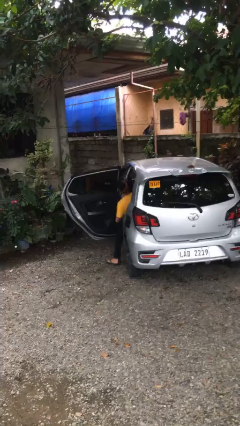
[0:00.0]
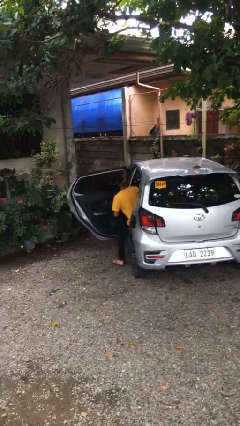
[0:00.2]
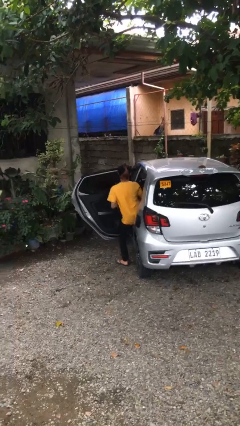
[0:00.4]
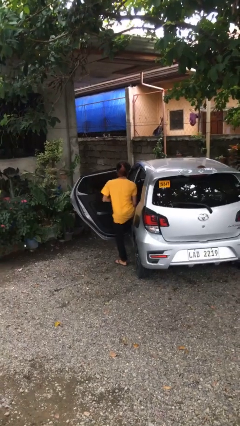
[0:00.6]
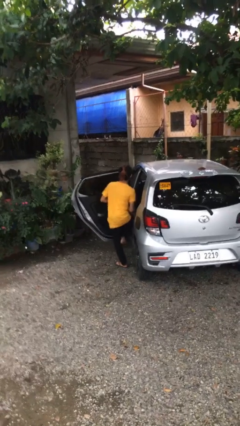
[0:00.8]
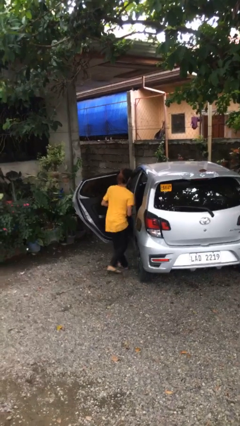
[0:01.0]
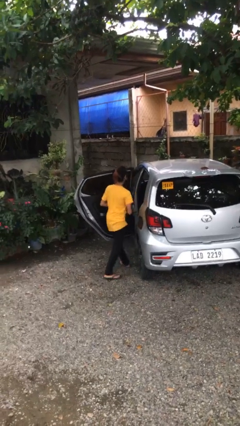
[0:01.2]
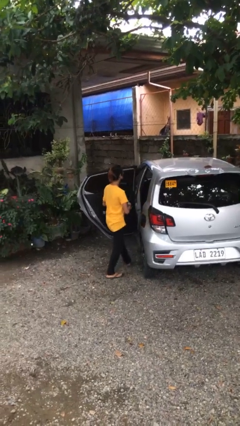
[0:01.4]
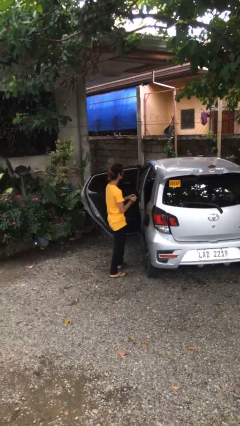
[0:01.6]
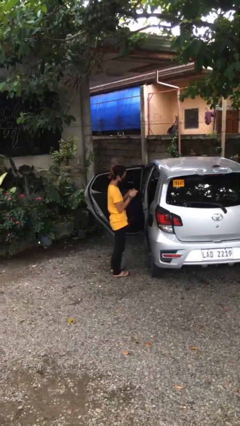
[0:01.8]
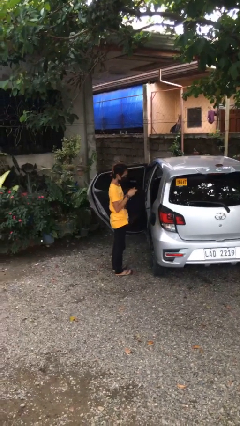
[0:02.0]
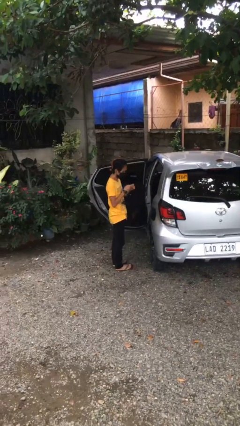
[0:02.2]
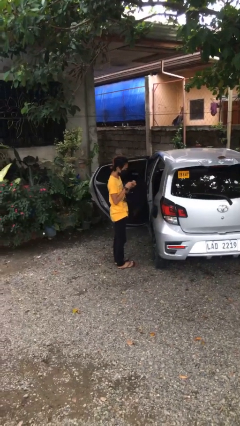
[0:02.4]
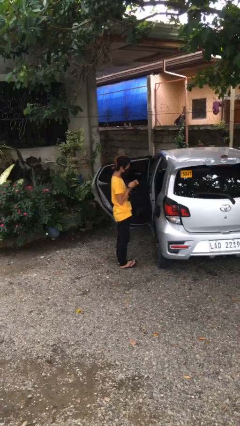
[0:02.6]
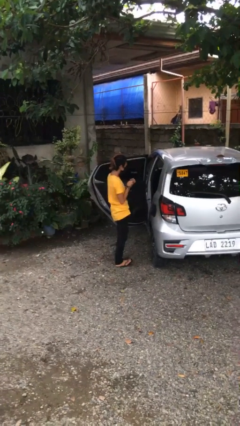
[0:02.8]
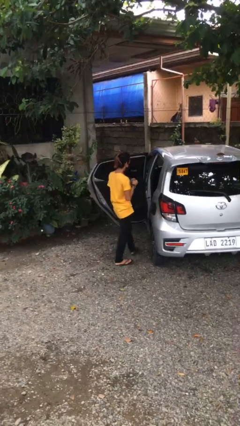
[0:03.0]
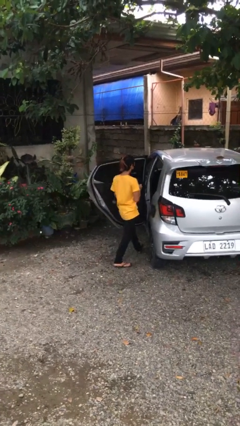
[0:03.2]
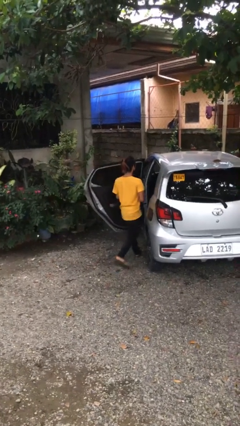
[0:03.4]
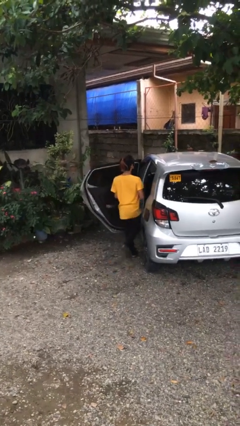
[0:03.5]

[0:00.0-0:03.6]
person exits car

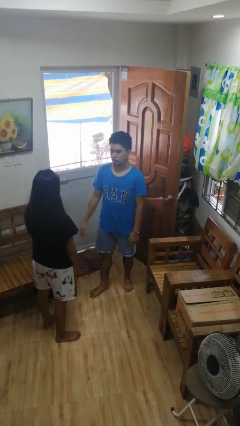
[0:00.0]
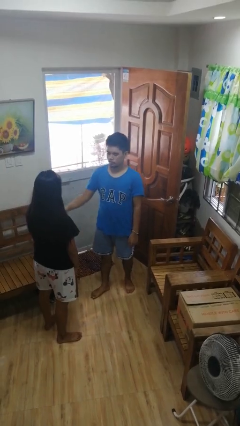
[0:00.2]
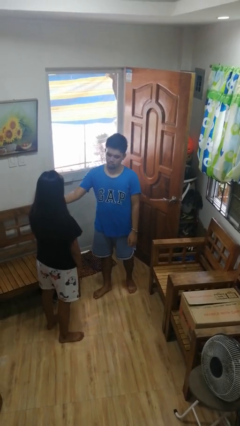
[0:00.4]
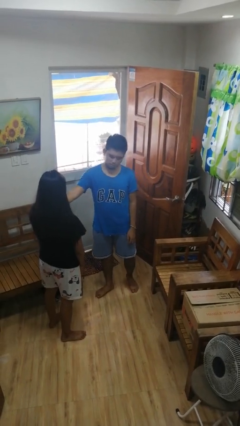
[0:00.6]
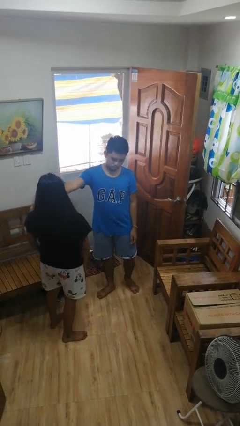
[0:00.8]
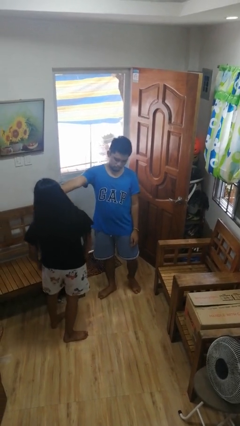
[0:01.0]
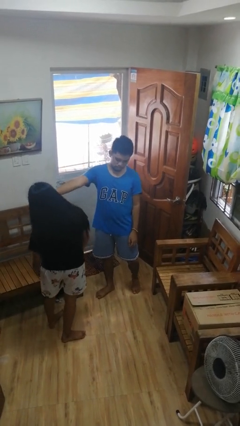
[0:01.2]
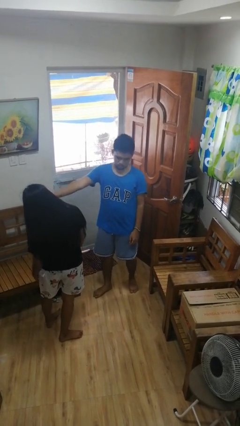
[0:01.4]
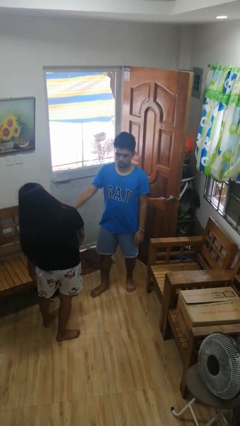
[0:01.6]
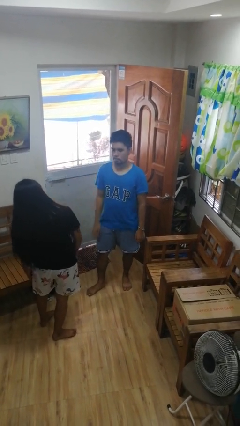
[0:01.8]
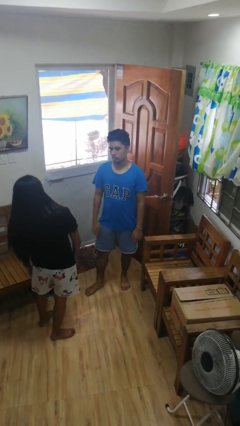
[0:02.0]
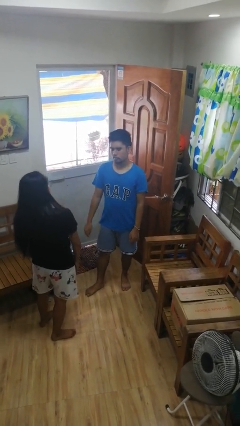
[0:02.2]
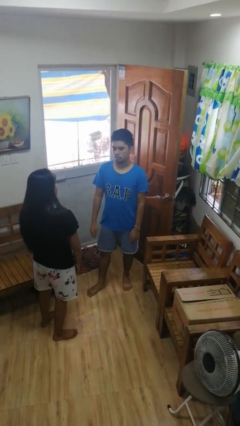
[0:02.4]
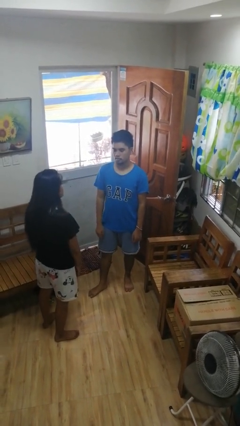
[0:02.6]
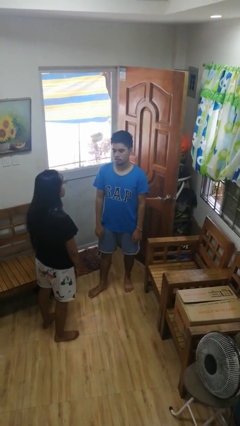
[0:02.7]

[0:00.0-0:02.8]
person shoves person

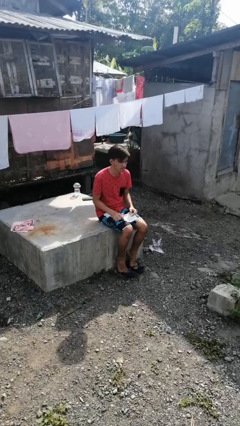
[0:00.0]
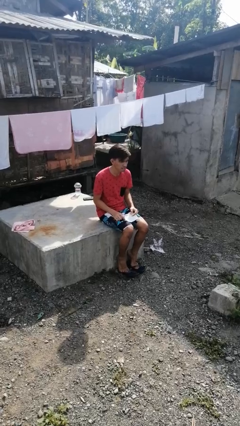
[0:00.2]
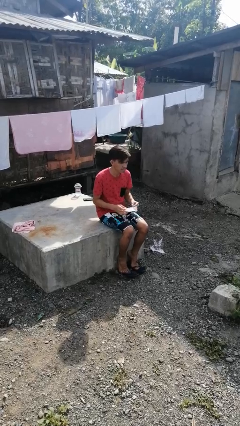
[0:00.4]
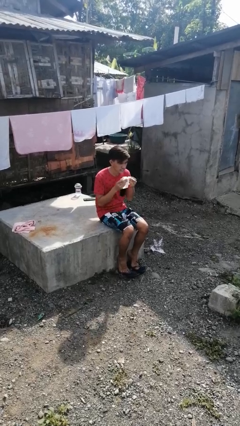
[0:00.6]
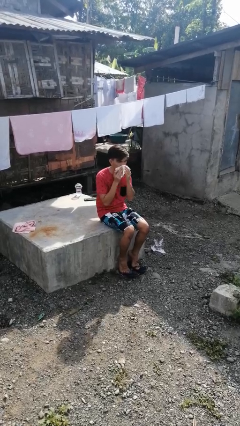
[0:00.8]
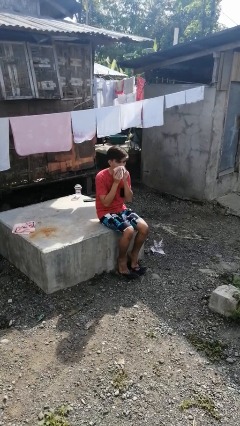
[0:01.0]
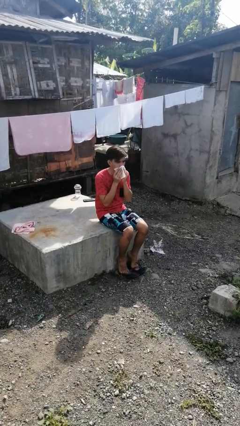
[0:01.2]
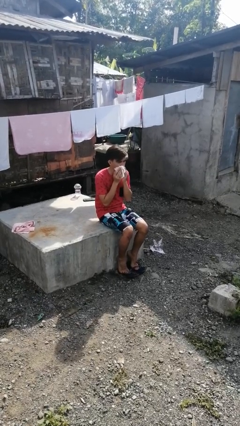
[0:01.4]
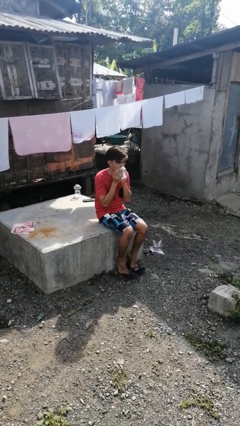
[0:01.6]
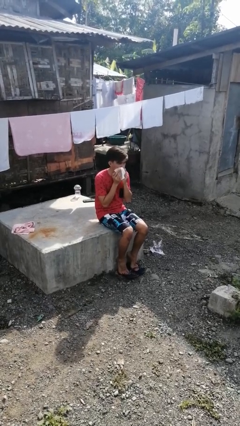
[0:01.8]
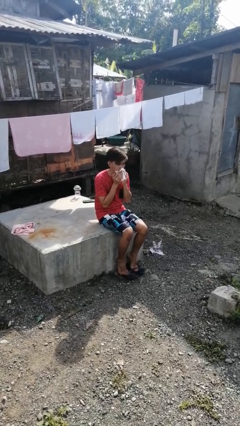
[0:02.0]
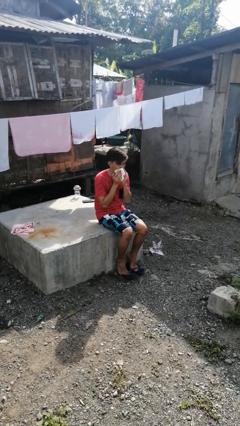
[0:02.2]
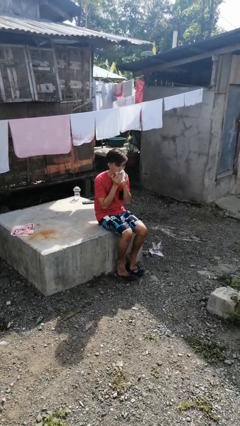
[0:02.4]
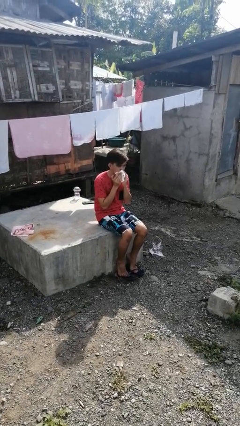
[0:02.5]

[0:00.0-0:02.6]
person wipes mouth with napkin

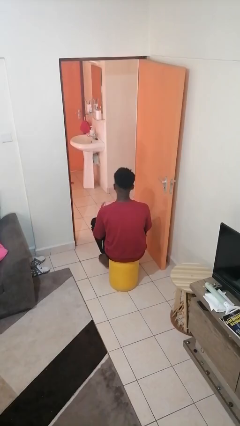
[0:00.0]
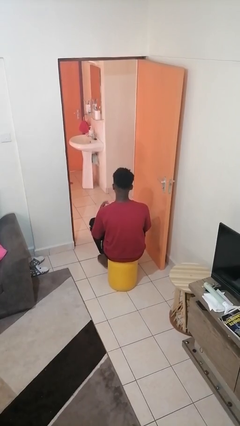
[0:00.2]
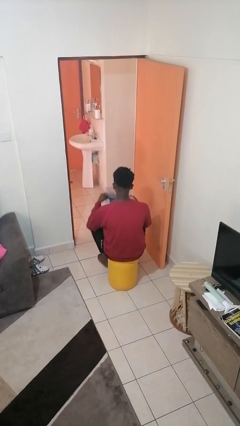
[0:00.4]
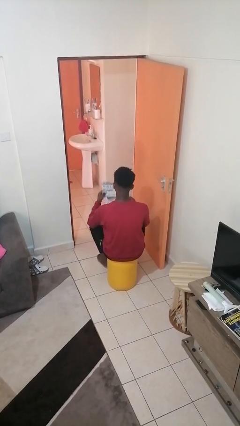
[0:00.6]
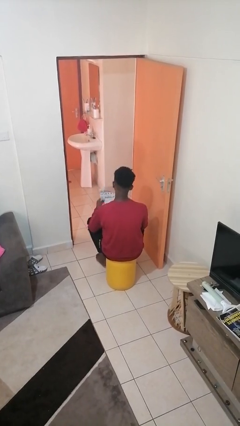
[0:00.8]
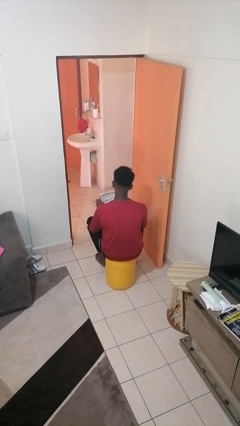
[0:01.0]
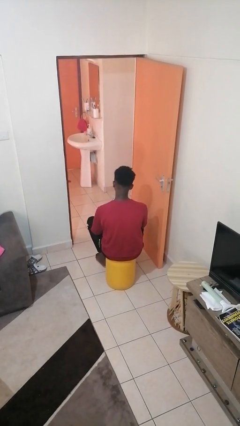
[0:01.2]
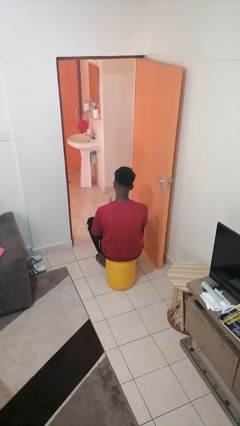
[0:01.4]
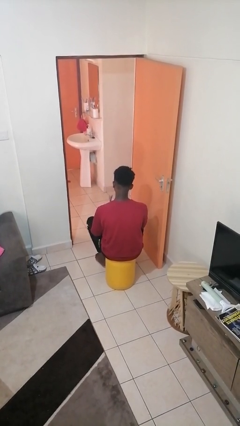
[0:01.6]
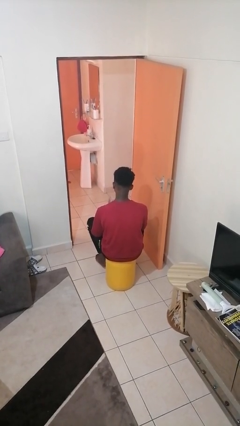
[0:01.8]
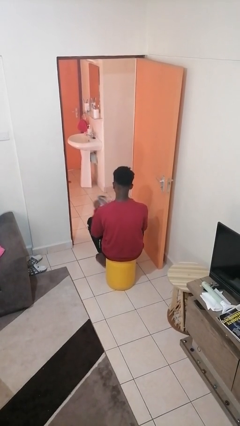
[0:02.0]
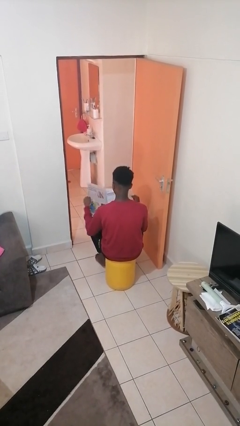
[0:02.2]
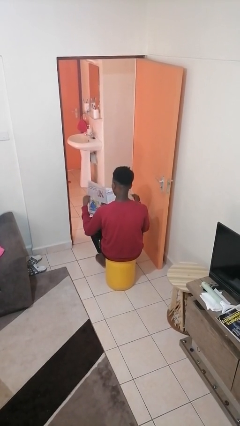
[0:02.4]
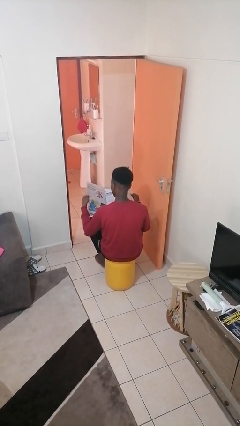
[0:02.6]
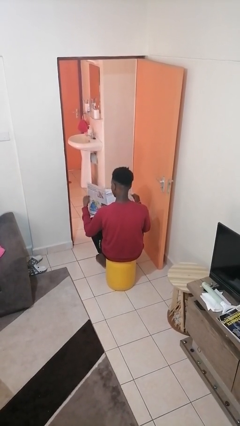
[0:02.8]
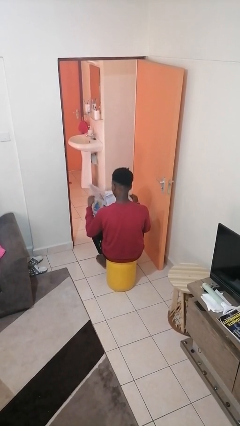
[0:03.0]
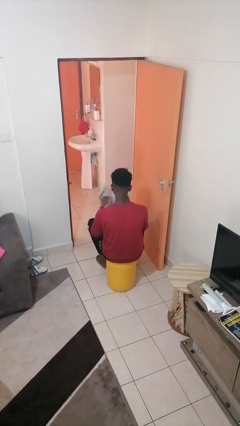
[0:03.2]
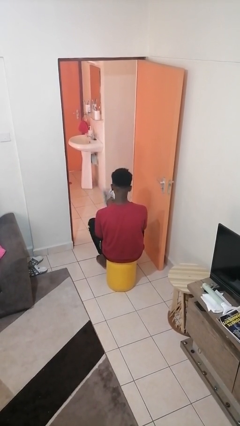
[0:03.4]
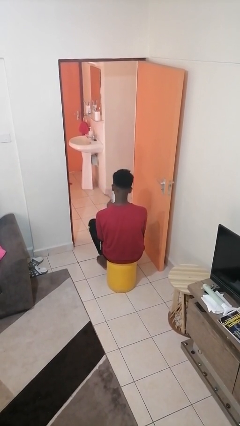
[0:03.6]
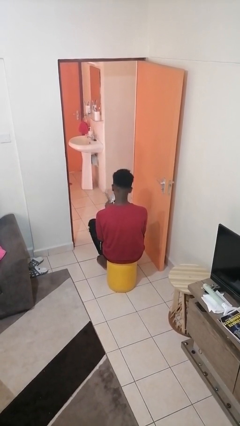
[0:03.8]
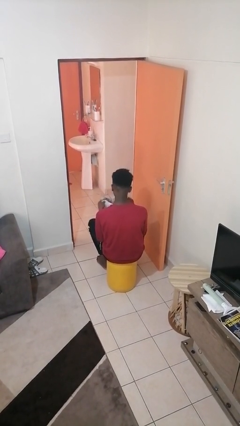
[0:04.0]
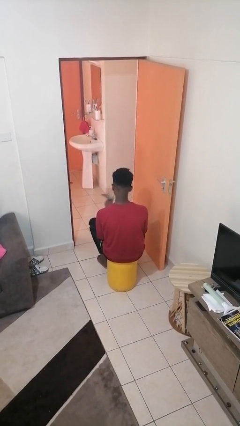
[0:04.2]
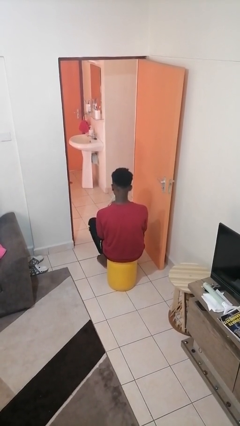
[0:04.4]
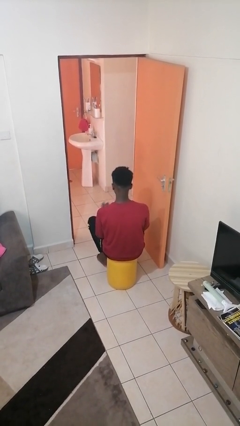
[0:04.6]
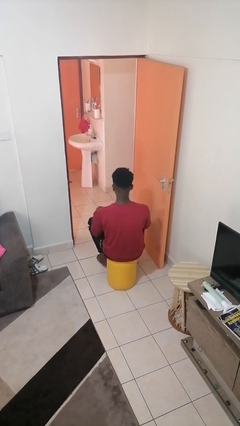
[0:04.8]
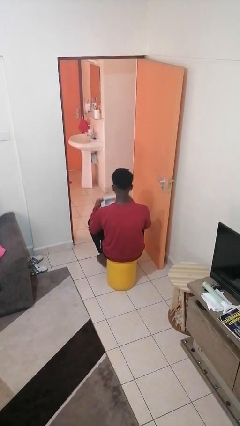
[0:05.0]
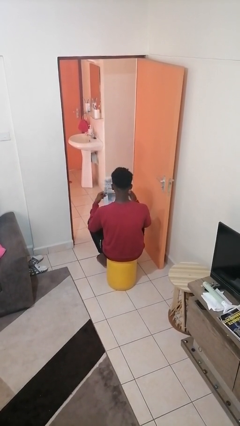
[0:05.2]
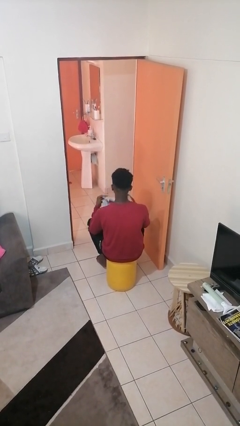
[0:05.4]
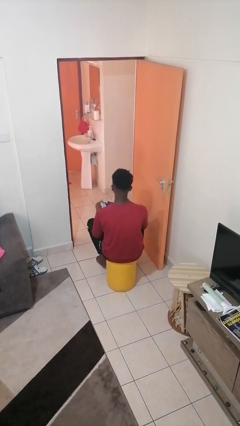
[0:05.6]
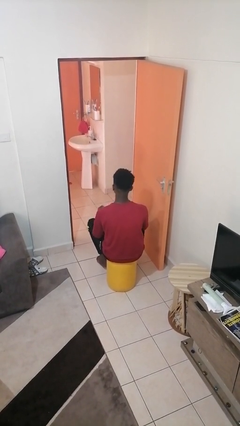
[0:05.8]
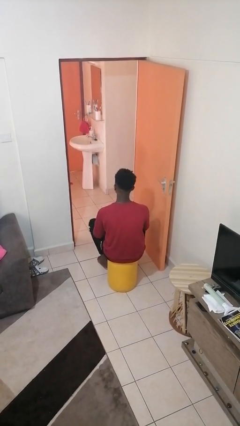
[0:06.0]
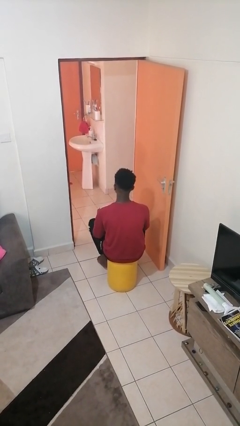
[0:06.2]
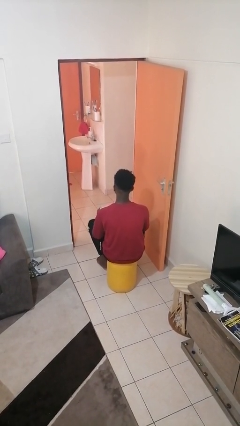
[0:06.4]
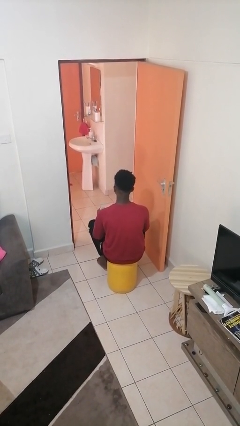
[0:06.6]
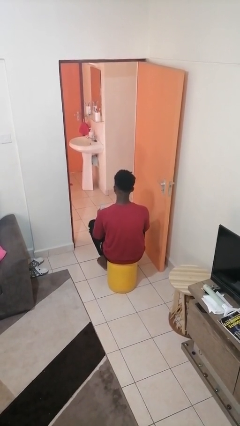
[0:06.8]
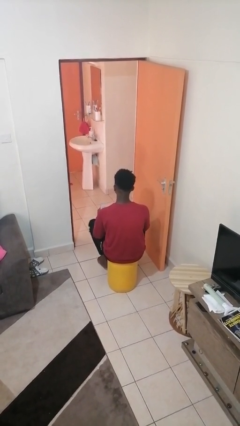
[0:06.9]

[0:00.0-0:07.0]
person reads newspaper

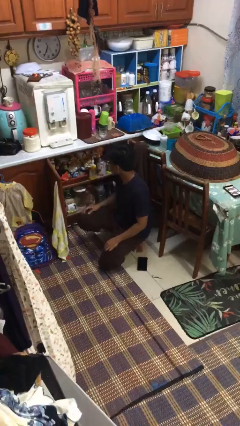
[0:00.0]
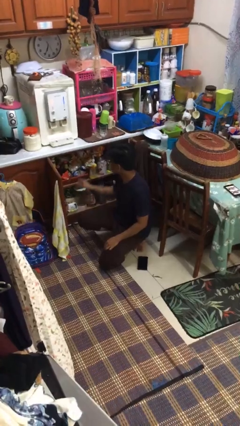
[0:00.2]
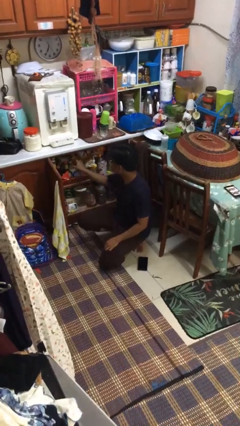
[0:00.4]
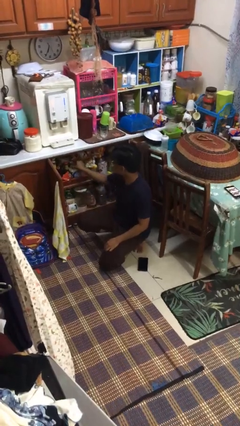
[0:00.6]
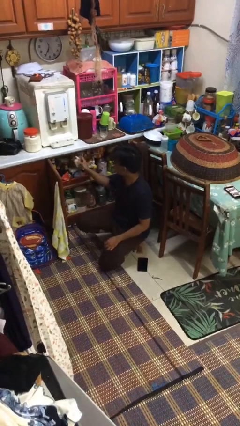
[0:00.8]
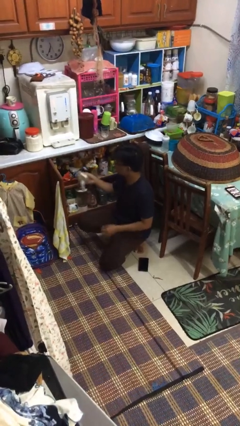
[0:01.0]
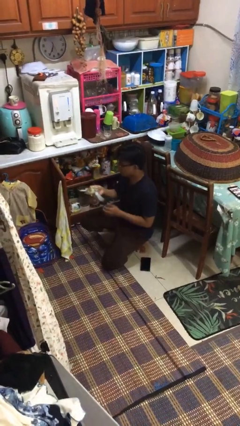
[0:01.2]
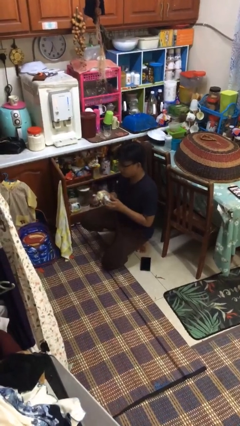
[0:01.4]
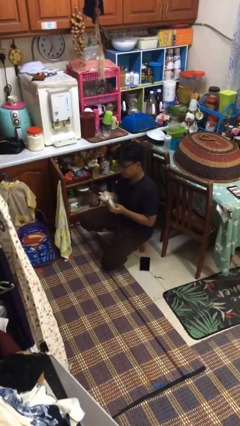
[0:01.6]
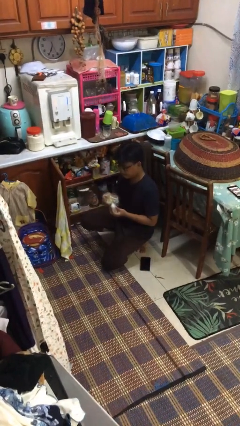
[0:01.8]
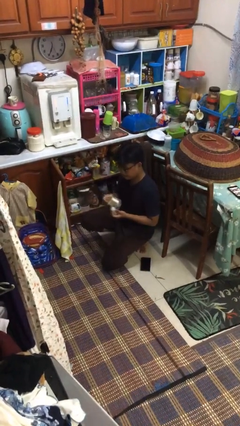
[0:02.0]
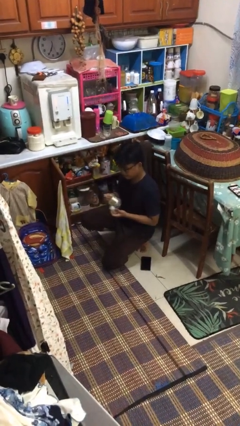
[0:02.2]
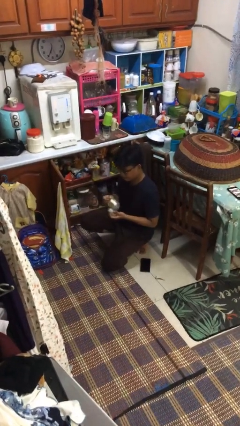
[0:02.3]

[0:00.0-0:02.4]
person takes object from cabinet
